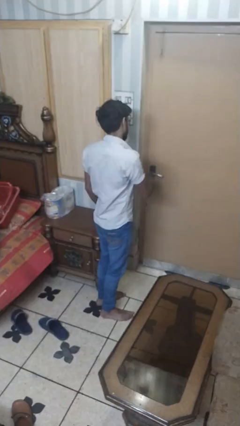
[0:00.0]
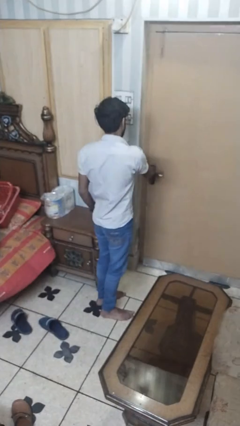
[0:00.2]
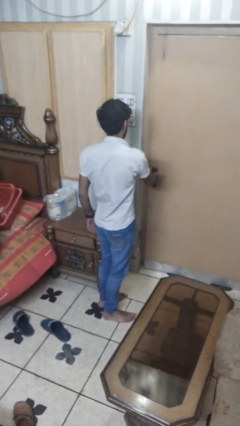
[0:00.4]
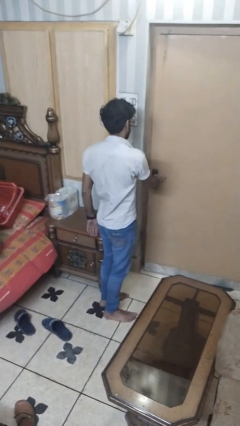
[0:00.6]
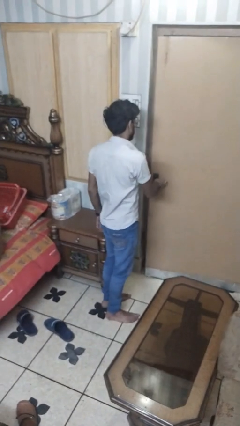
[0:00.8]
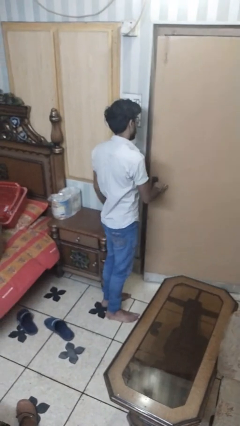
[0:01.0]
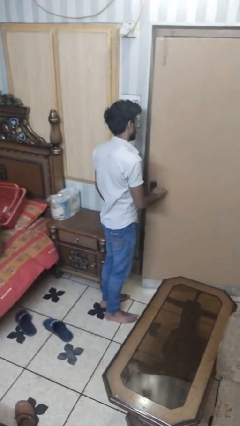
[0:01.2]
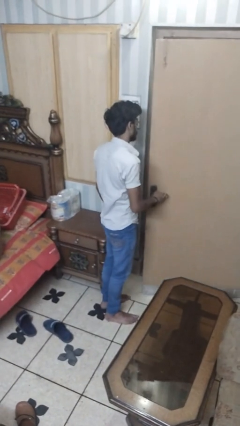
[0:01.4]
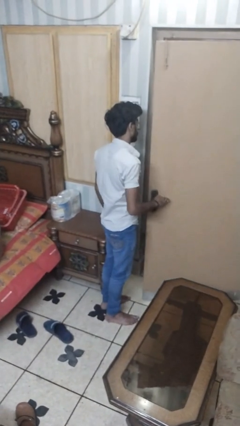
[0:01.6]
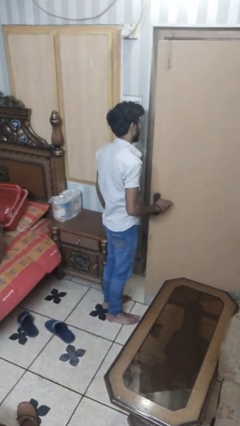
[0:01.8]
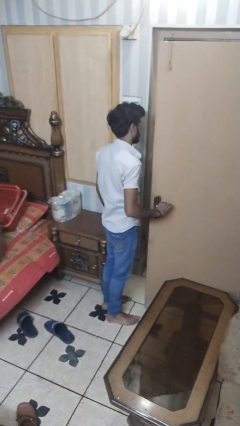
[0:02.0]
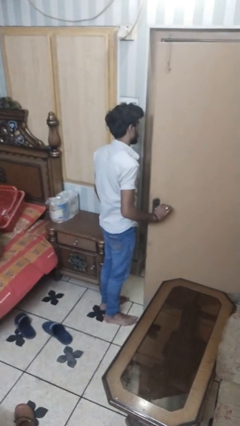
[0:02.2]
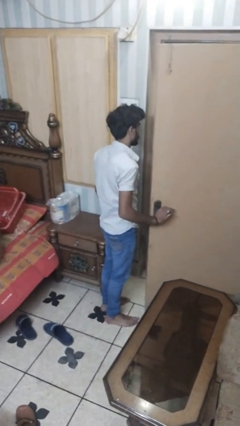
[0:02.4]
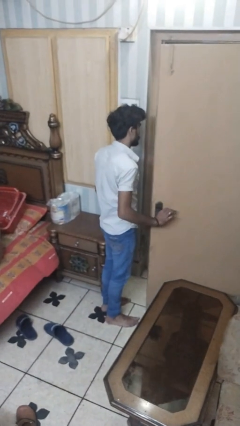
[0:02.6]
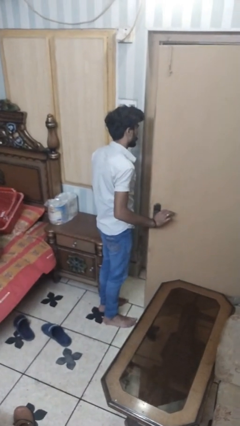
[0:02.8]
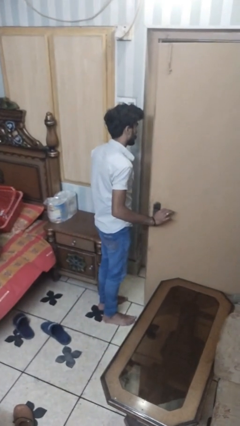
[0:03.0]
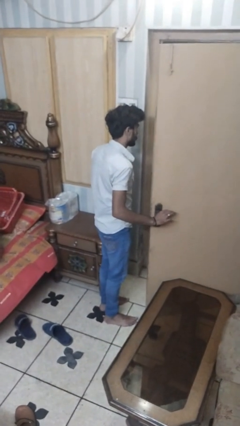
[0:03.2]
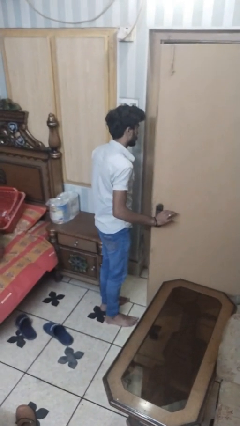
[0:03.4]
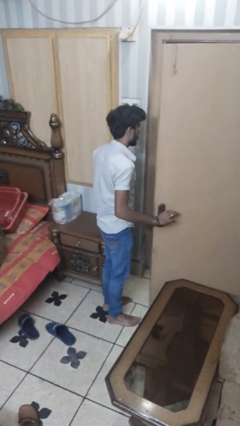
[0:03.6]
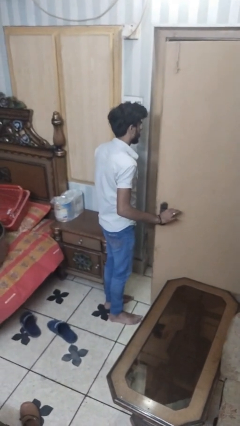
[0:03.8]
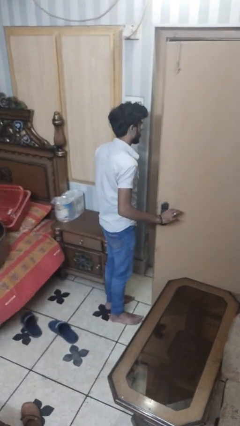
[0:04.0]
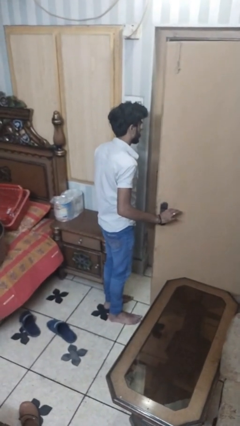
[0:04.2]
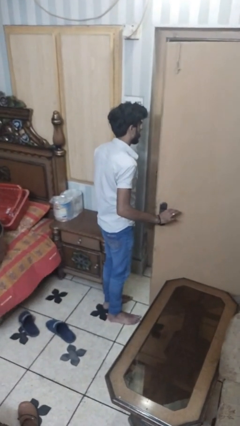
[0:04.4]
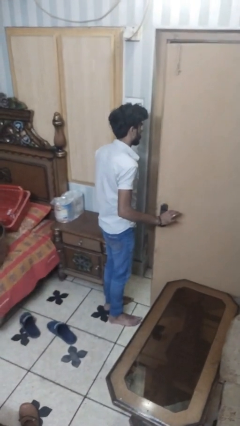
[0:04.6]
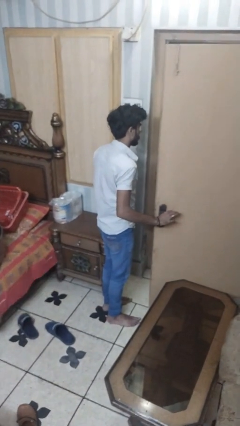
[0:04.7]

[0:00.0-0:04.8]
person opens closet door

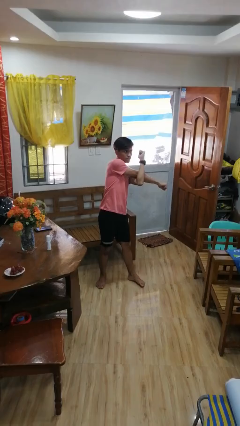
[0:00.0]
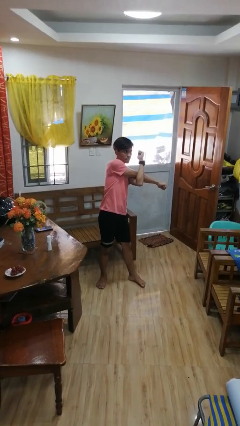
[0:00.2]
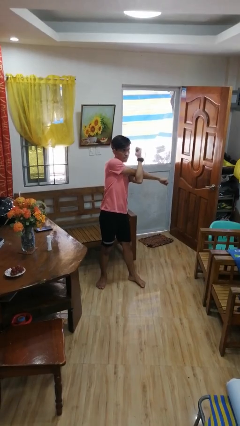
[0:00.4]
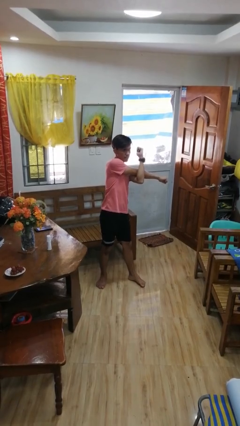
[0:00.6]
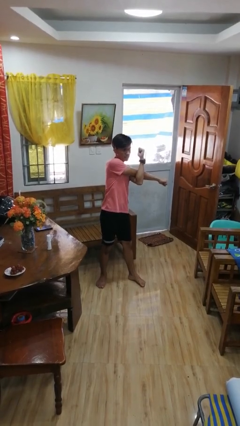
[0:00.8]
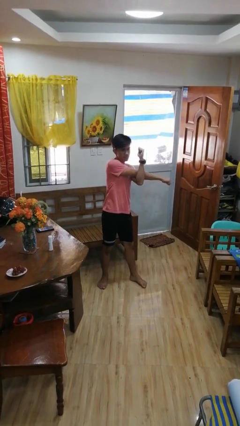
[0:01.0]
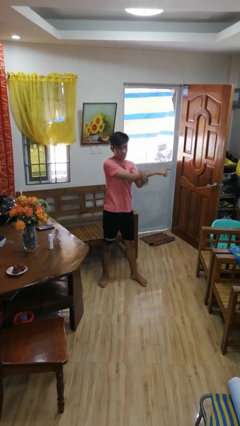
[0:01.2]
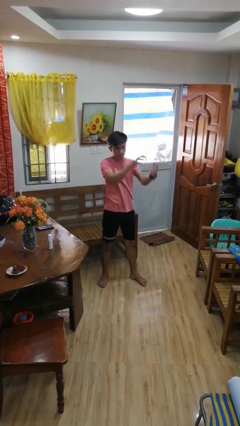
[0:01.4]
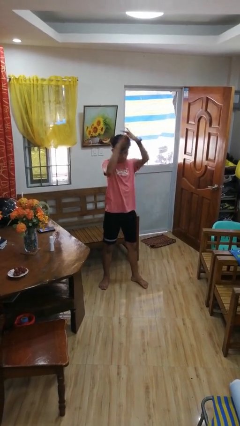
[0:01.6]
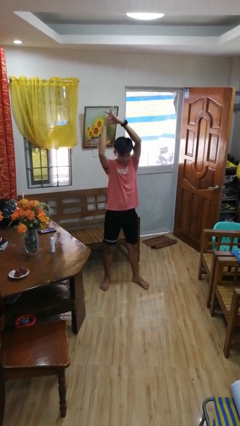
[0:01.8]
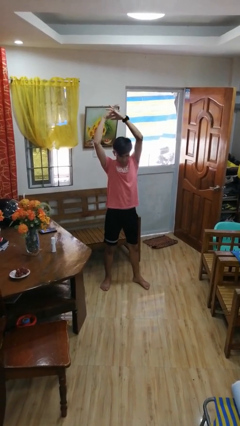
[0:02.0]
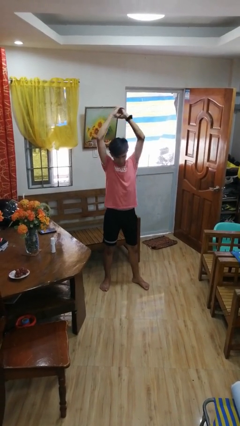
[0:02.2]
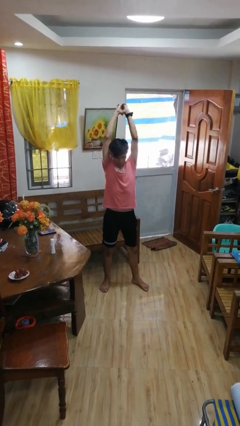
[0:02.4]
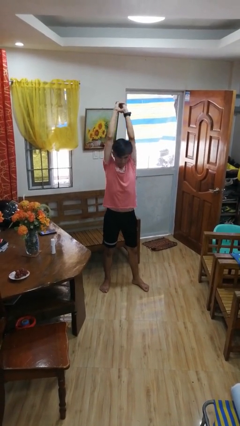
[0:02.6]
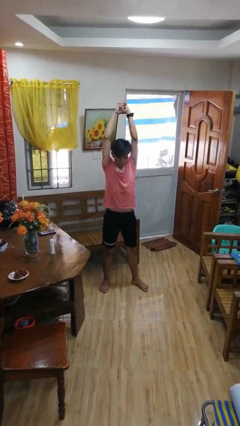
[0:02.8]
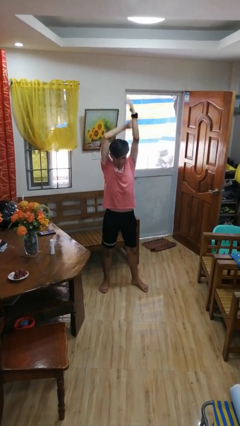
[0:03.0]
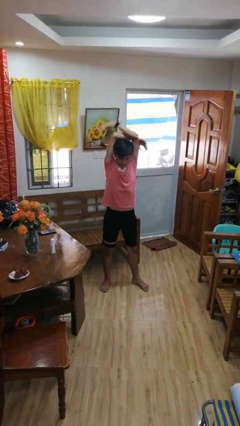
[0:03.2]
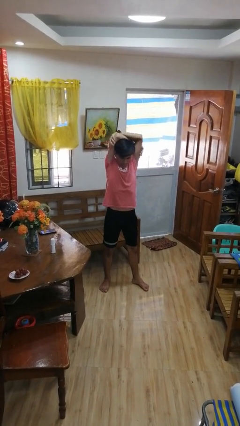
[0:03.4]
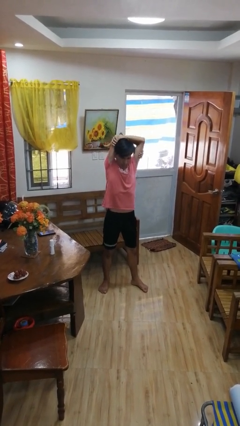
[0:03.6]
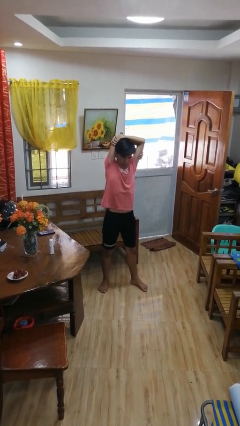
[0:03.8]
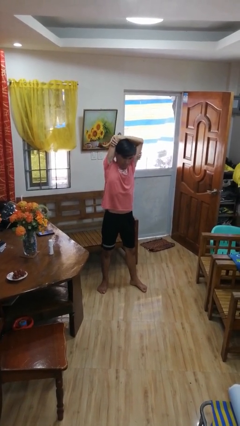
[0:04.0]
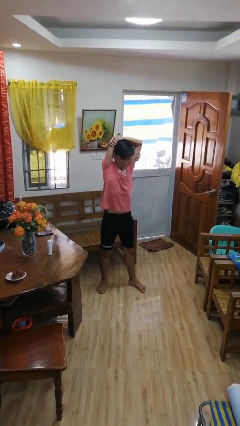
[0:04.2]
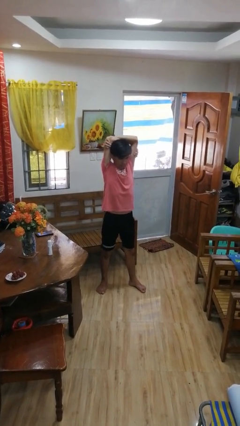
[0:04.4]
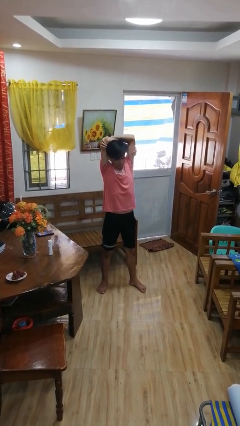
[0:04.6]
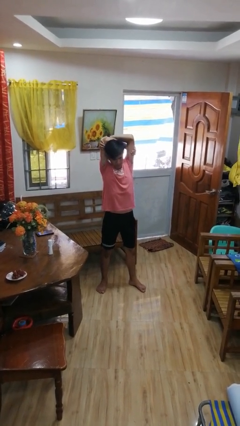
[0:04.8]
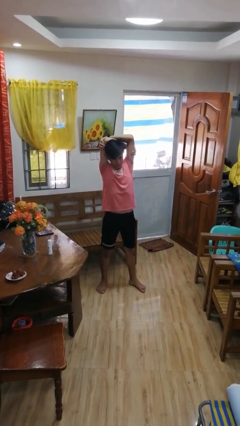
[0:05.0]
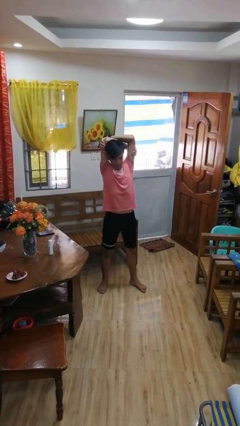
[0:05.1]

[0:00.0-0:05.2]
person stretches arms over head

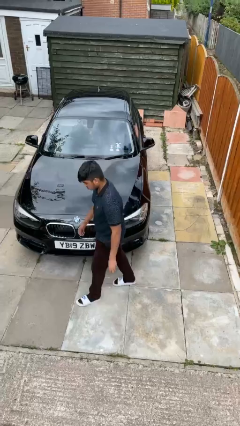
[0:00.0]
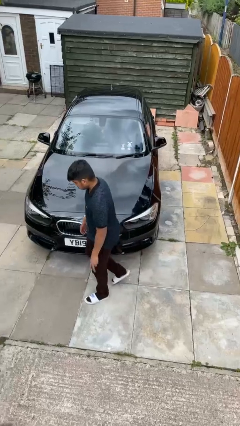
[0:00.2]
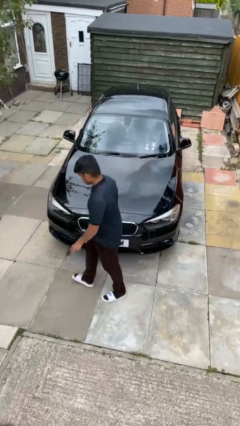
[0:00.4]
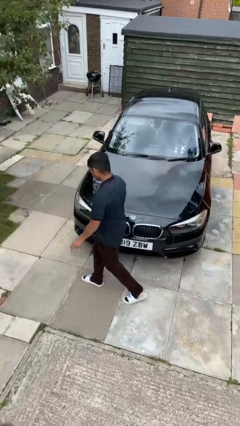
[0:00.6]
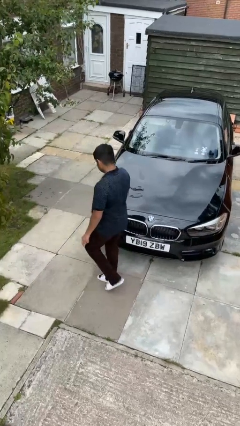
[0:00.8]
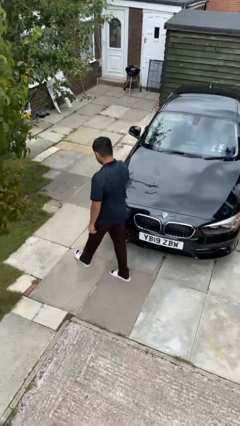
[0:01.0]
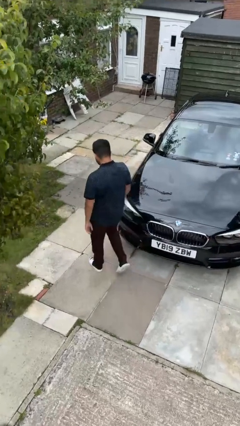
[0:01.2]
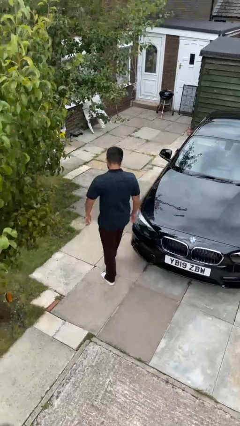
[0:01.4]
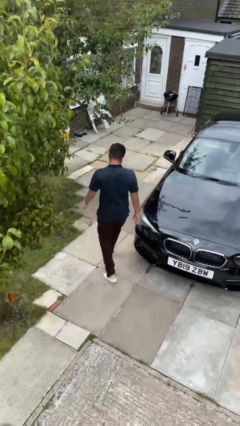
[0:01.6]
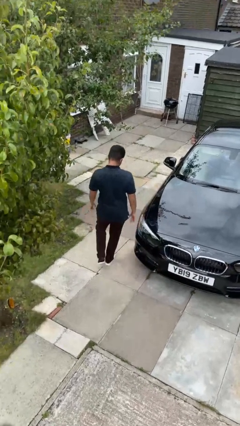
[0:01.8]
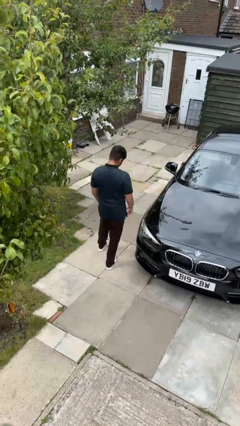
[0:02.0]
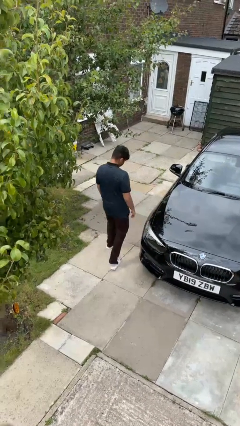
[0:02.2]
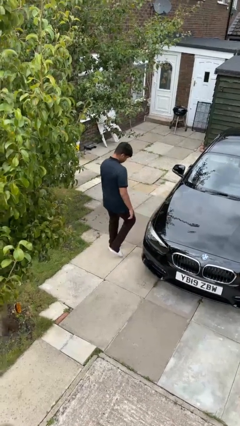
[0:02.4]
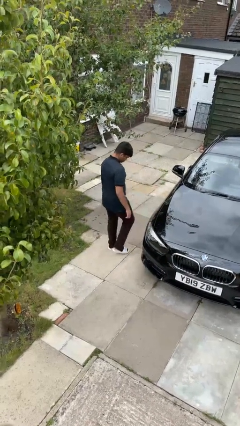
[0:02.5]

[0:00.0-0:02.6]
person walks around car

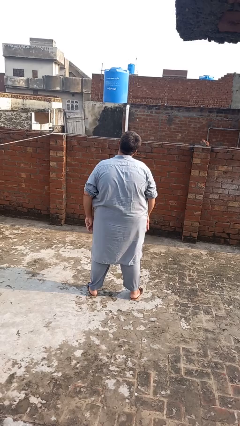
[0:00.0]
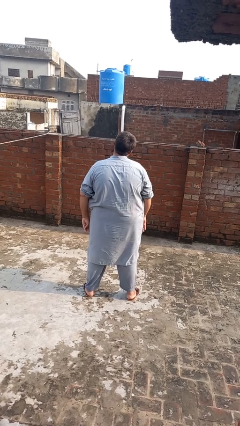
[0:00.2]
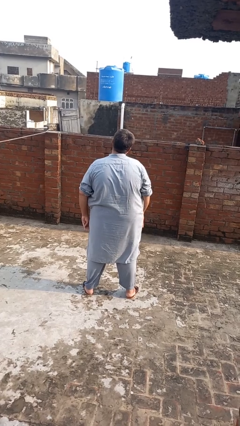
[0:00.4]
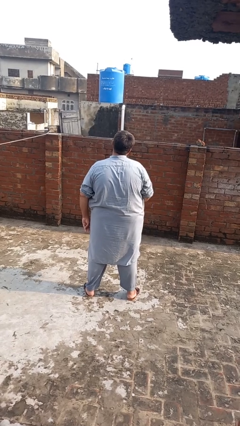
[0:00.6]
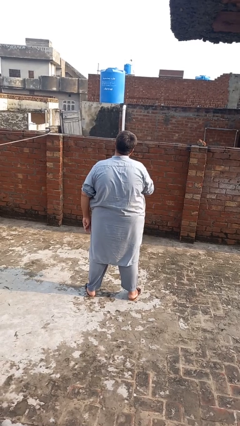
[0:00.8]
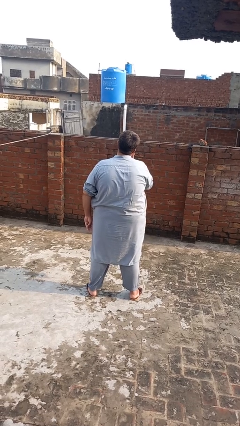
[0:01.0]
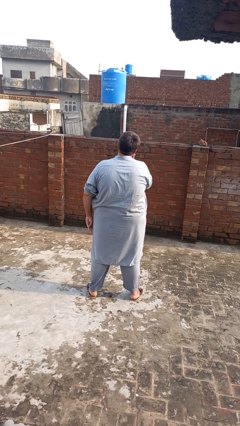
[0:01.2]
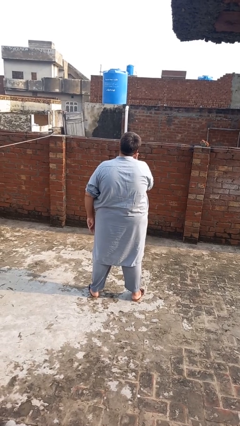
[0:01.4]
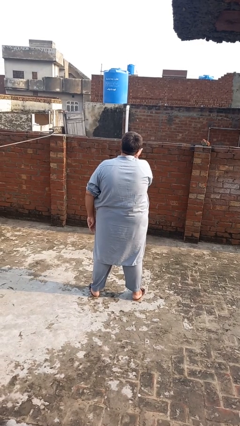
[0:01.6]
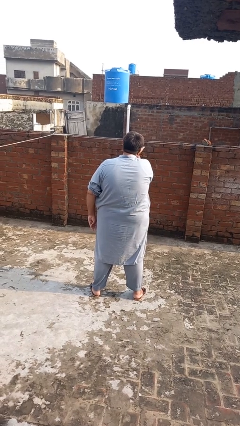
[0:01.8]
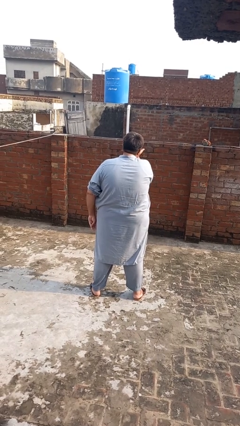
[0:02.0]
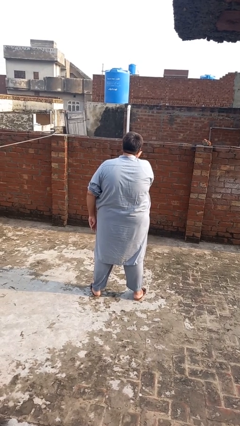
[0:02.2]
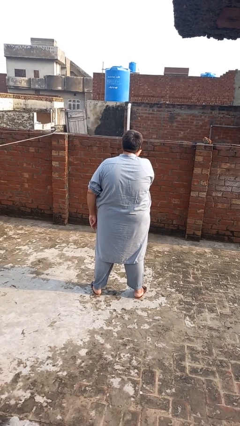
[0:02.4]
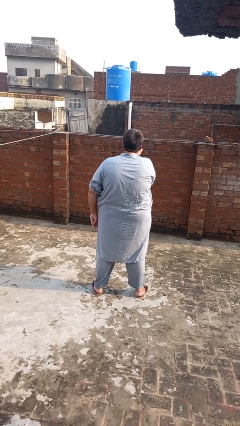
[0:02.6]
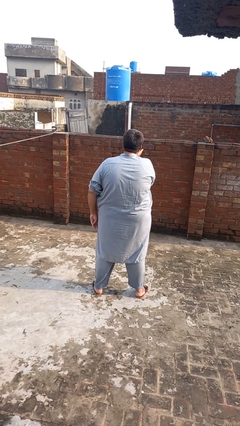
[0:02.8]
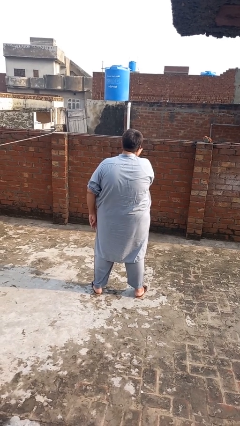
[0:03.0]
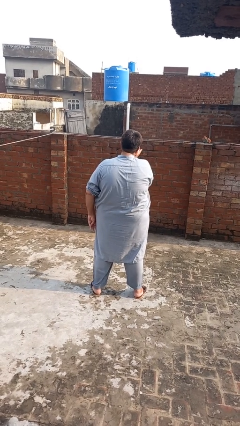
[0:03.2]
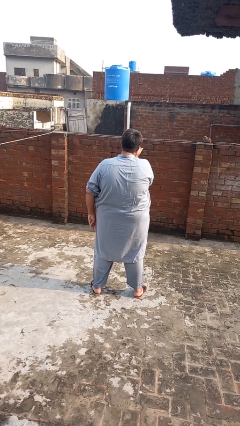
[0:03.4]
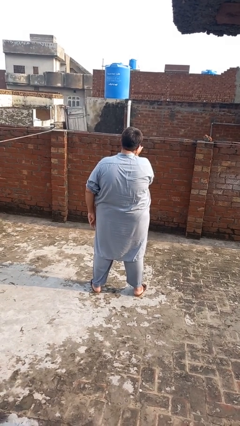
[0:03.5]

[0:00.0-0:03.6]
person gestures blow kiss

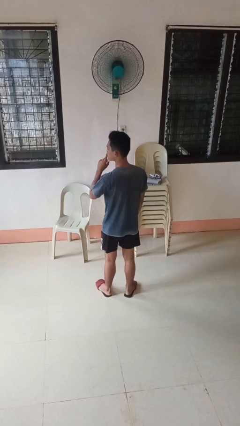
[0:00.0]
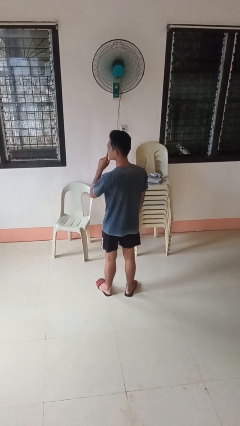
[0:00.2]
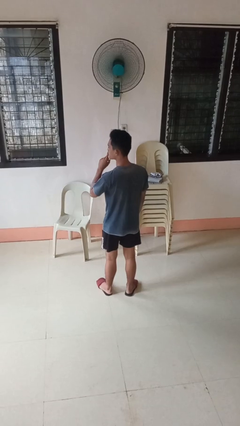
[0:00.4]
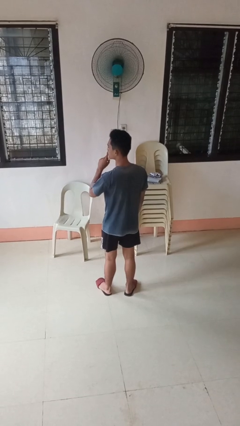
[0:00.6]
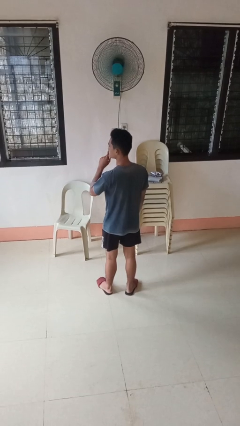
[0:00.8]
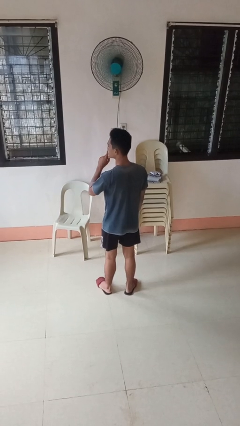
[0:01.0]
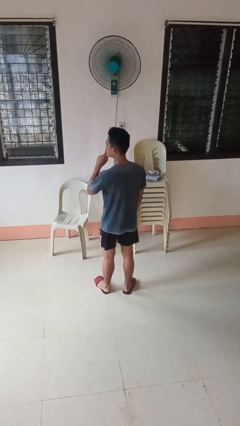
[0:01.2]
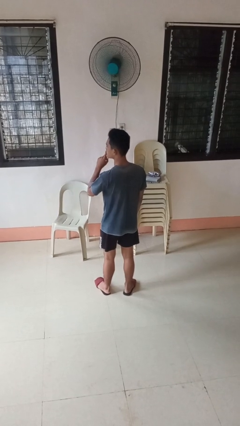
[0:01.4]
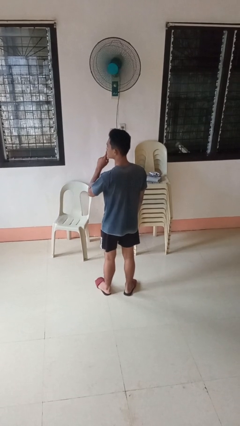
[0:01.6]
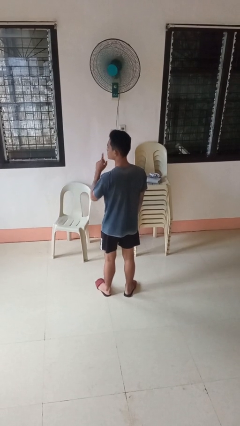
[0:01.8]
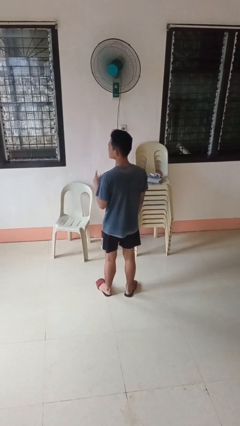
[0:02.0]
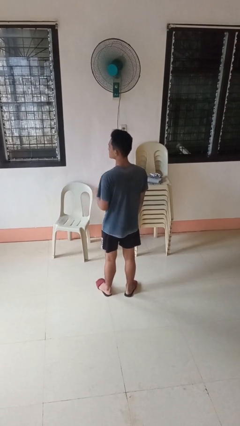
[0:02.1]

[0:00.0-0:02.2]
person gestures be quiet
